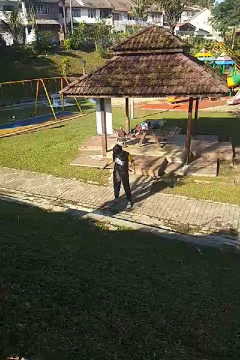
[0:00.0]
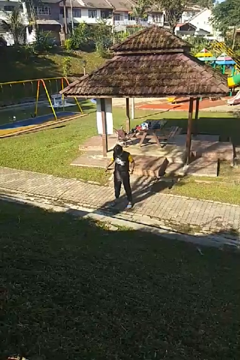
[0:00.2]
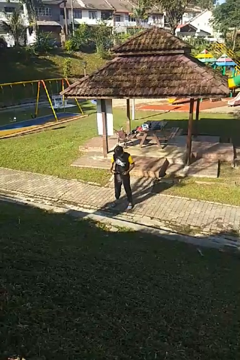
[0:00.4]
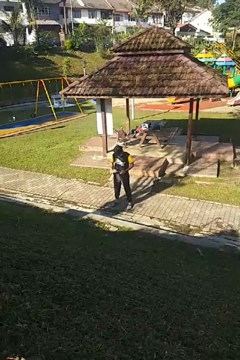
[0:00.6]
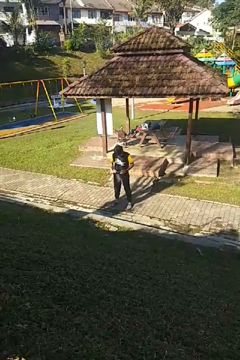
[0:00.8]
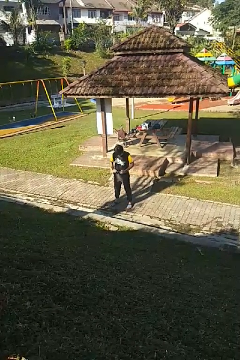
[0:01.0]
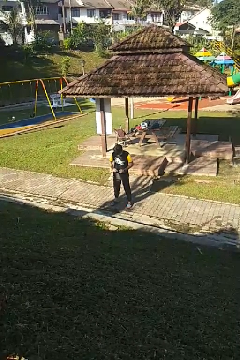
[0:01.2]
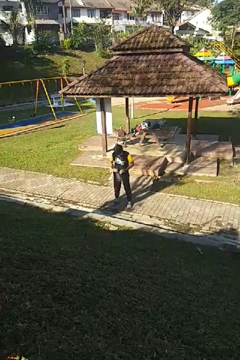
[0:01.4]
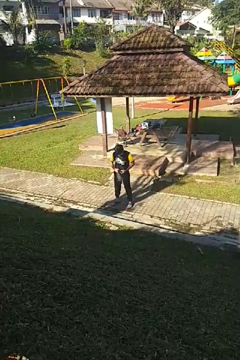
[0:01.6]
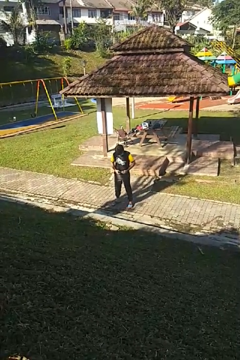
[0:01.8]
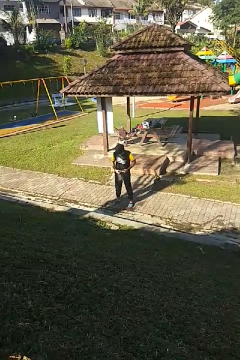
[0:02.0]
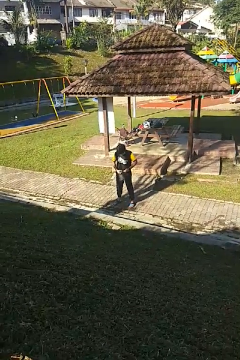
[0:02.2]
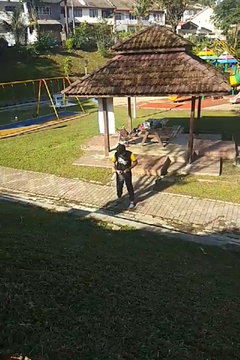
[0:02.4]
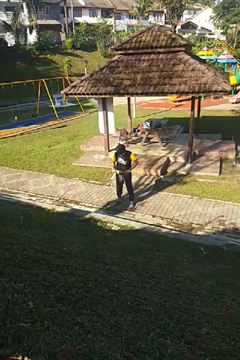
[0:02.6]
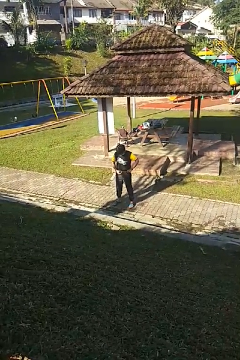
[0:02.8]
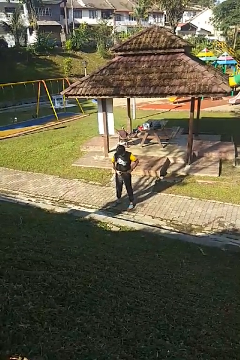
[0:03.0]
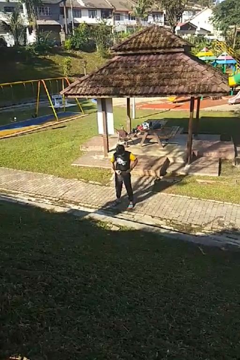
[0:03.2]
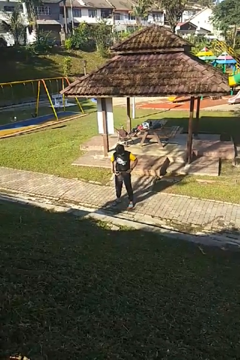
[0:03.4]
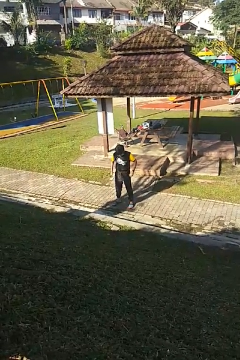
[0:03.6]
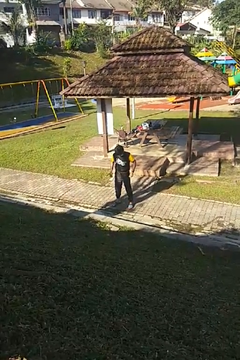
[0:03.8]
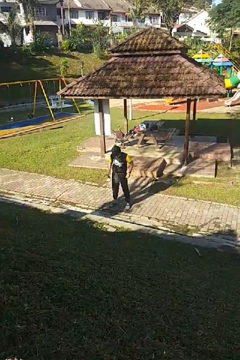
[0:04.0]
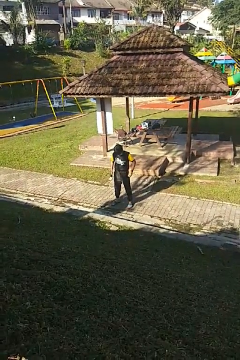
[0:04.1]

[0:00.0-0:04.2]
person puts on belt

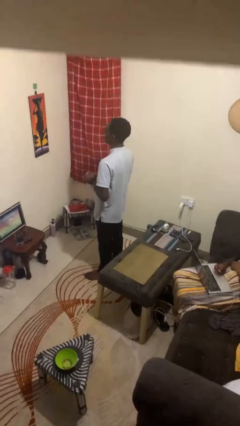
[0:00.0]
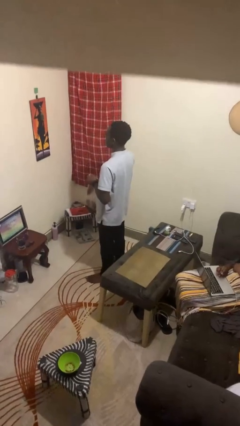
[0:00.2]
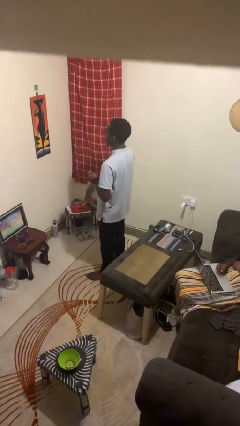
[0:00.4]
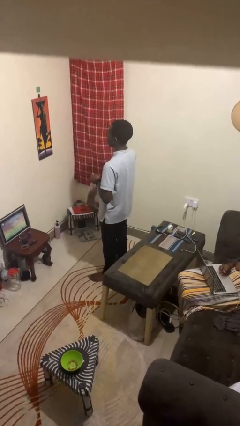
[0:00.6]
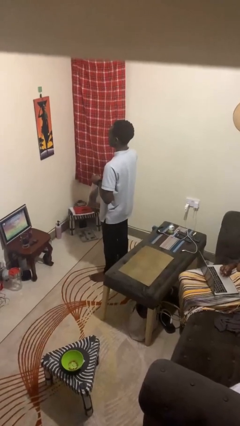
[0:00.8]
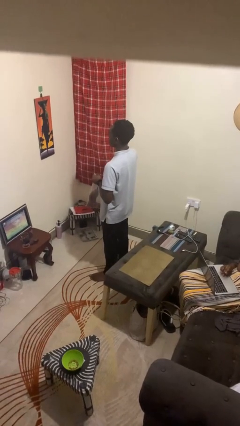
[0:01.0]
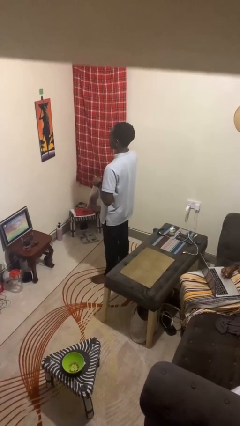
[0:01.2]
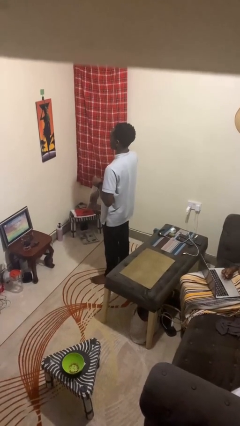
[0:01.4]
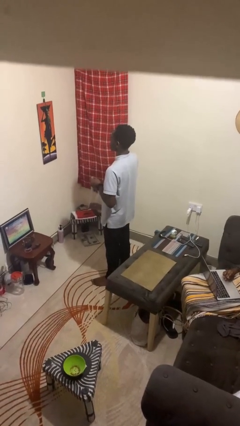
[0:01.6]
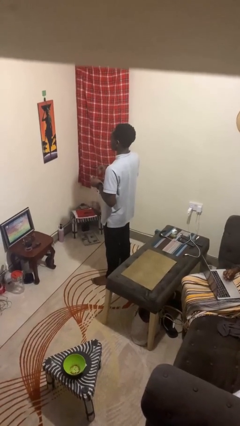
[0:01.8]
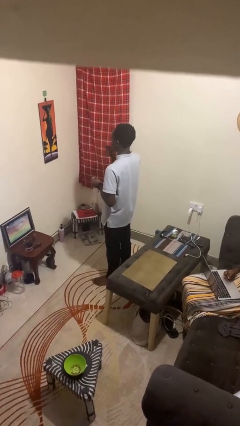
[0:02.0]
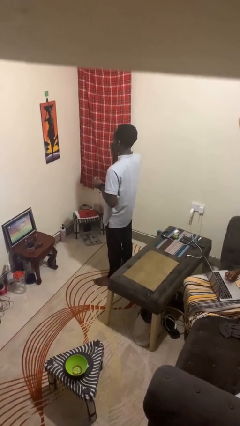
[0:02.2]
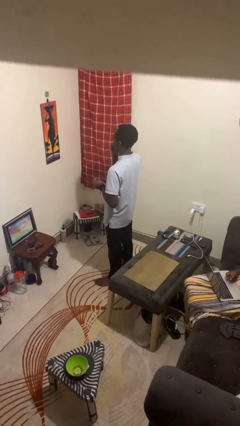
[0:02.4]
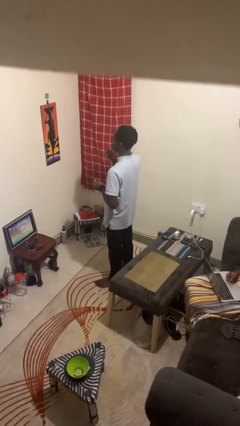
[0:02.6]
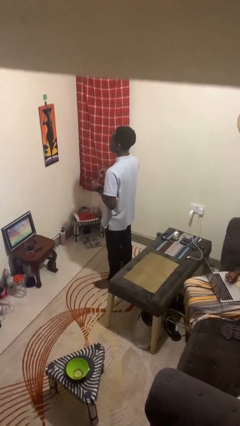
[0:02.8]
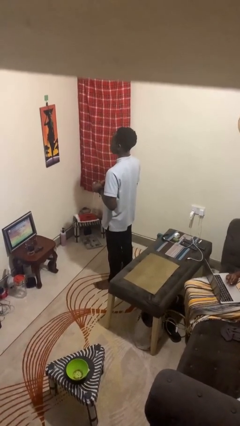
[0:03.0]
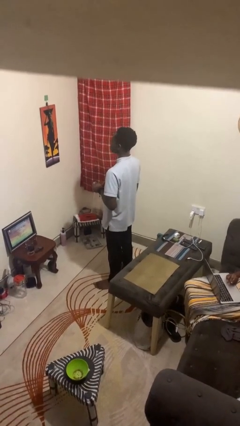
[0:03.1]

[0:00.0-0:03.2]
person eats snack from bag

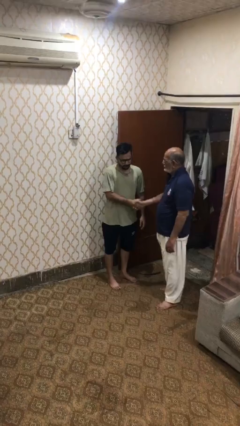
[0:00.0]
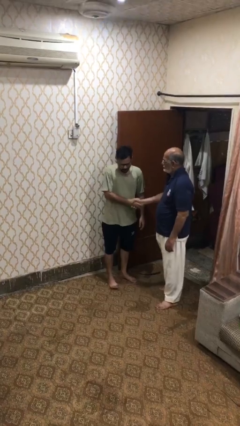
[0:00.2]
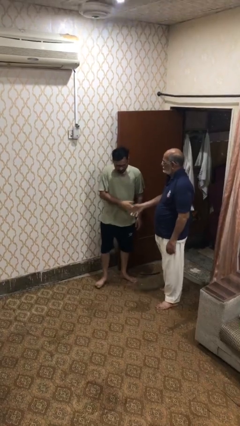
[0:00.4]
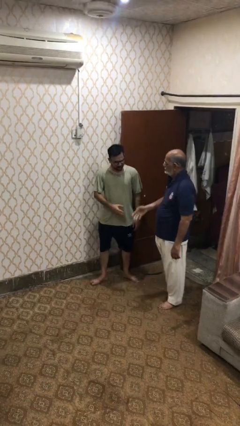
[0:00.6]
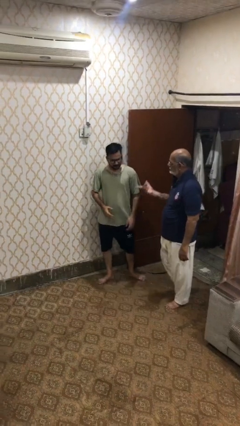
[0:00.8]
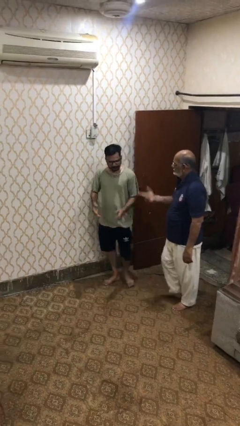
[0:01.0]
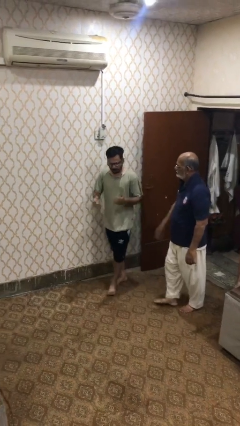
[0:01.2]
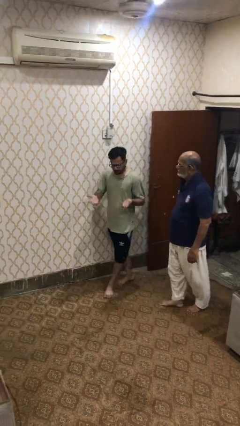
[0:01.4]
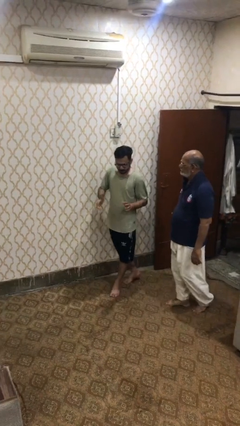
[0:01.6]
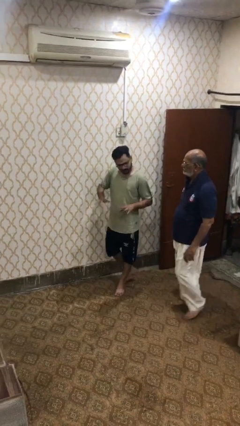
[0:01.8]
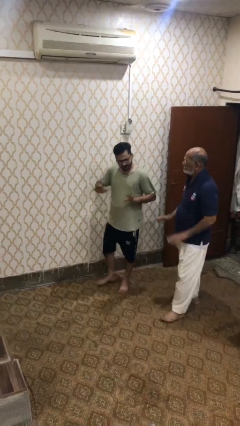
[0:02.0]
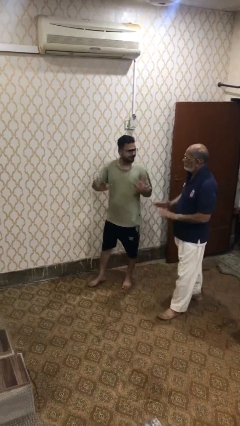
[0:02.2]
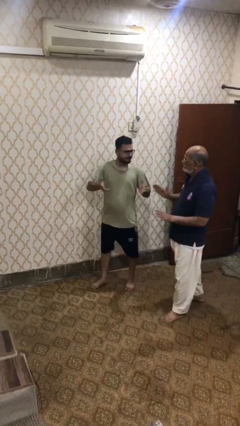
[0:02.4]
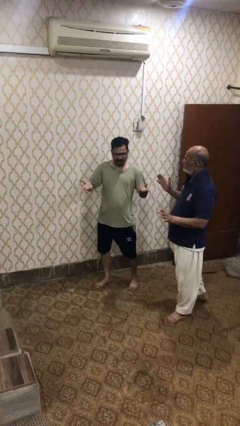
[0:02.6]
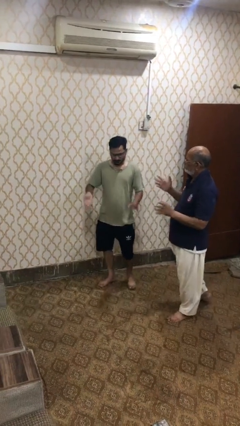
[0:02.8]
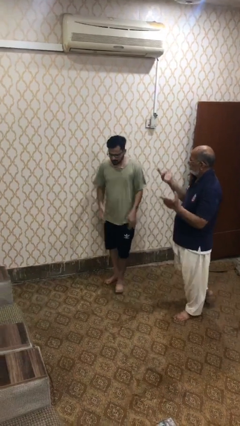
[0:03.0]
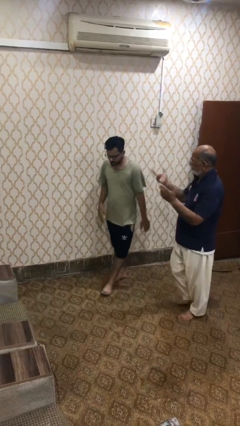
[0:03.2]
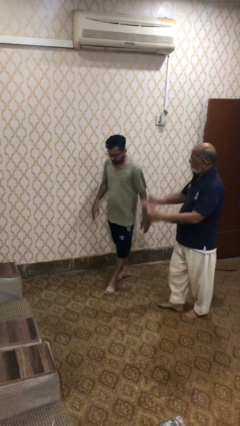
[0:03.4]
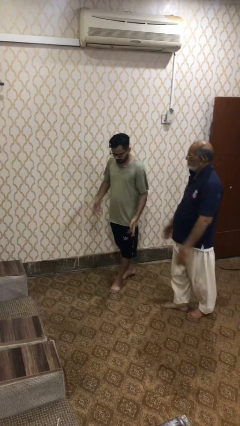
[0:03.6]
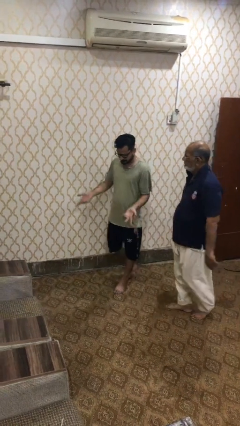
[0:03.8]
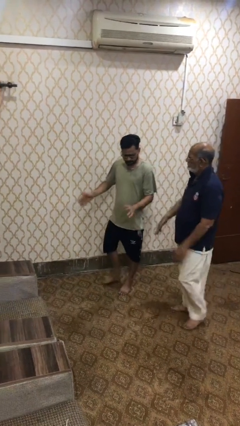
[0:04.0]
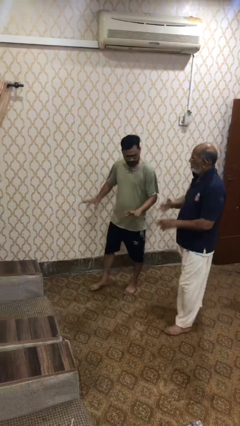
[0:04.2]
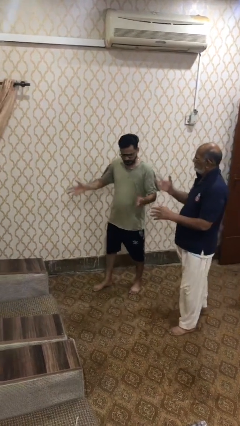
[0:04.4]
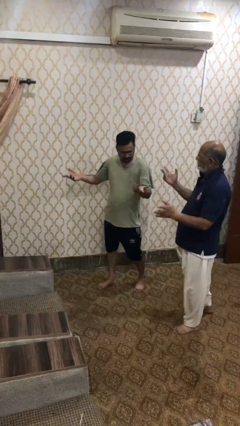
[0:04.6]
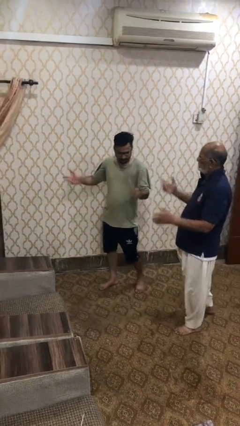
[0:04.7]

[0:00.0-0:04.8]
person talks to person

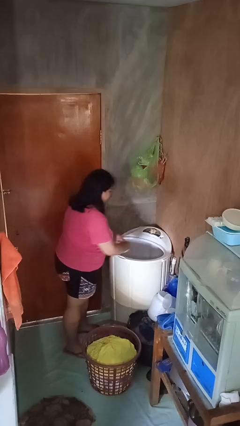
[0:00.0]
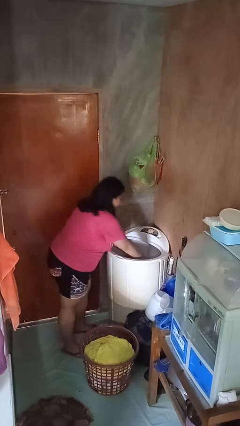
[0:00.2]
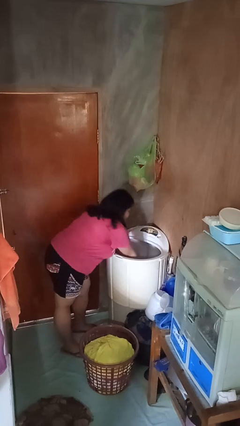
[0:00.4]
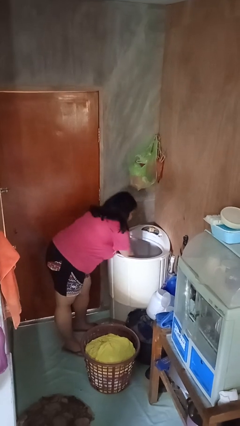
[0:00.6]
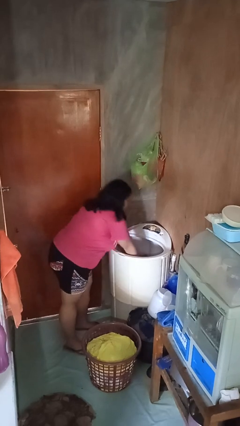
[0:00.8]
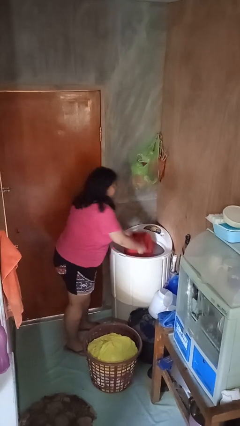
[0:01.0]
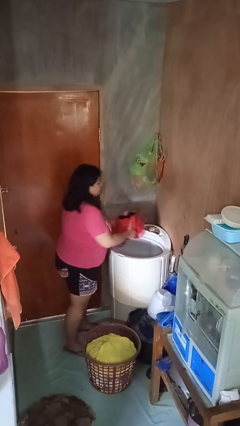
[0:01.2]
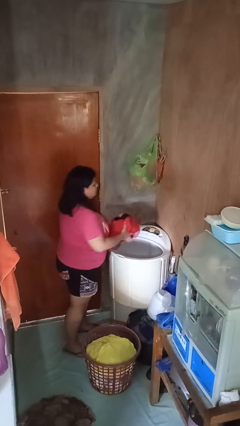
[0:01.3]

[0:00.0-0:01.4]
person unloads clotheswasher

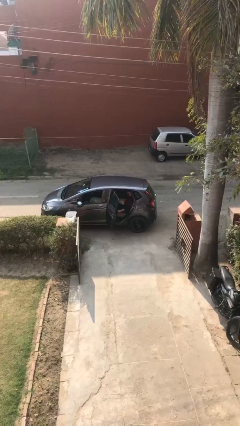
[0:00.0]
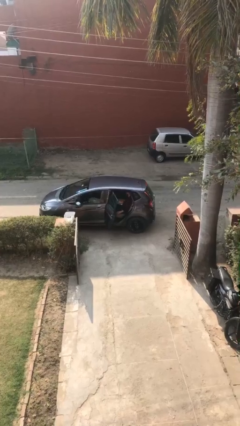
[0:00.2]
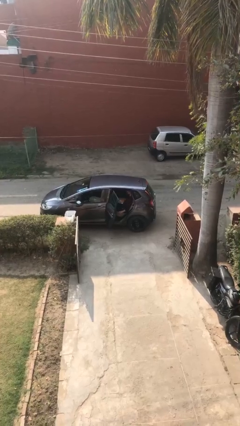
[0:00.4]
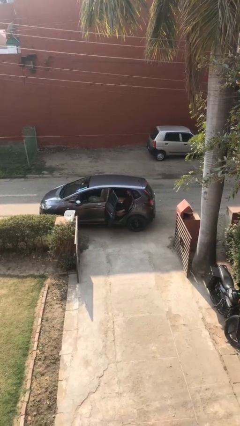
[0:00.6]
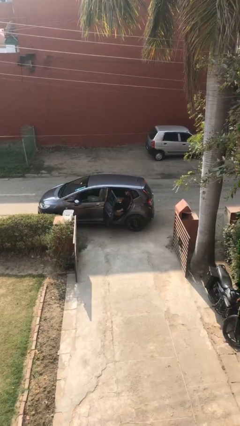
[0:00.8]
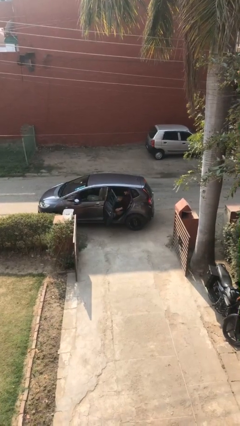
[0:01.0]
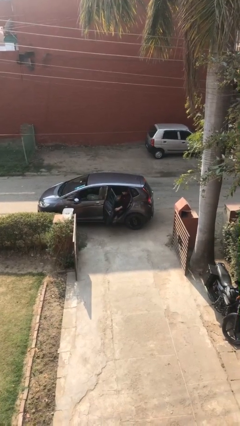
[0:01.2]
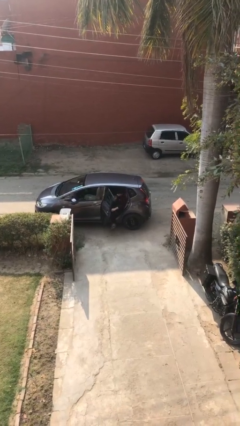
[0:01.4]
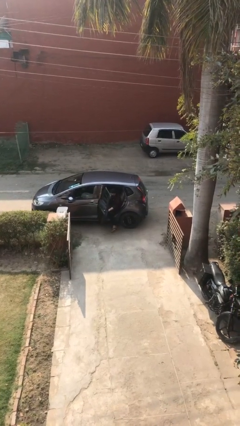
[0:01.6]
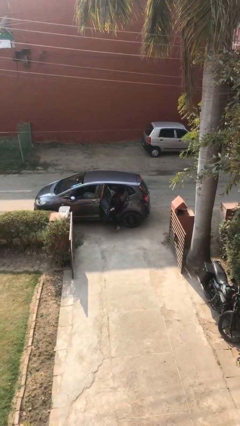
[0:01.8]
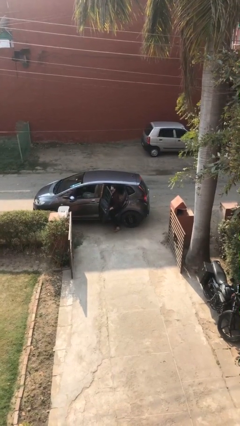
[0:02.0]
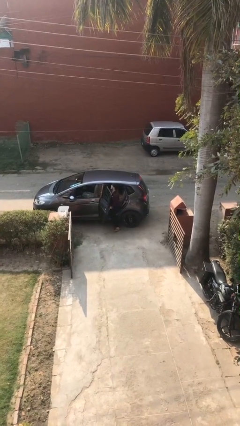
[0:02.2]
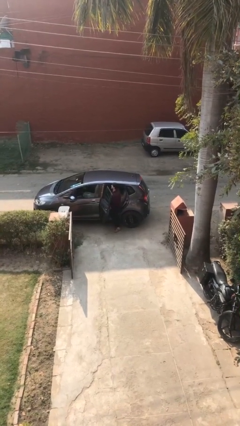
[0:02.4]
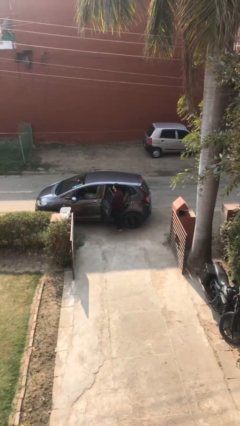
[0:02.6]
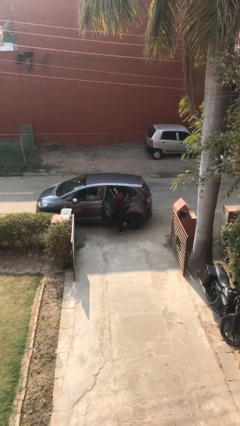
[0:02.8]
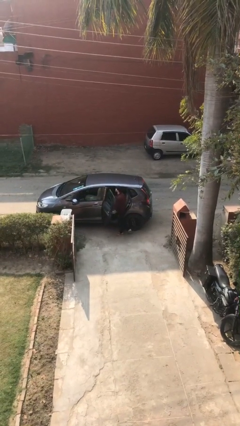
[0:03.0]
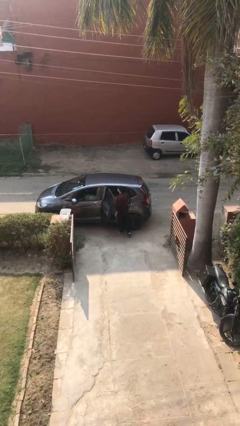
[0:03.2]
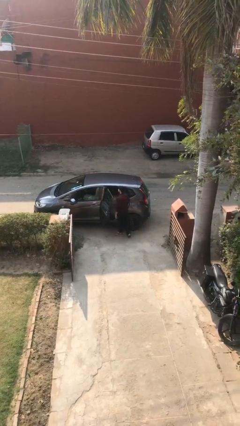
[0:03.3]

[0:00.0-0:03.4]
person exits car

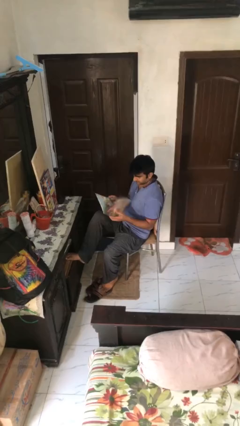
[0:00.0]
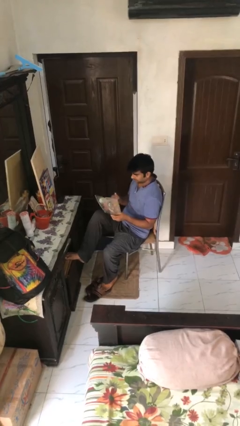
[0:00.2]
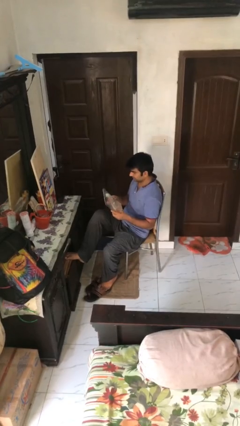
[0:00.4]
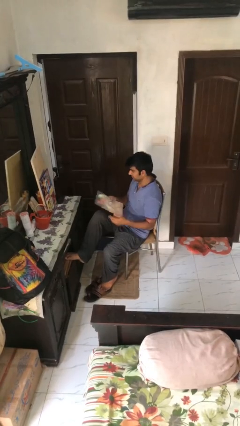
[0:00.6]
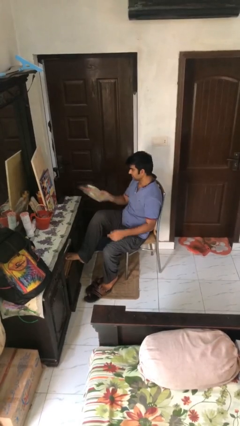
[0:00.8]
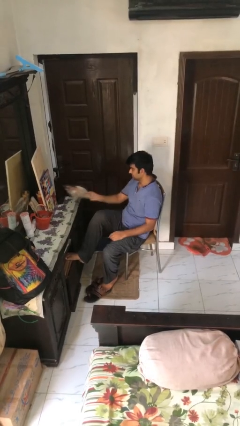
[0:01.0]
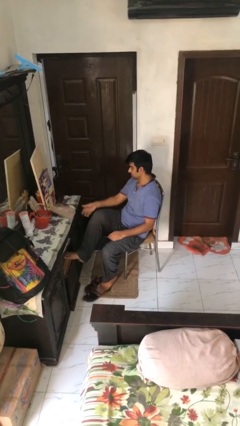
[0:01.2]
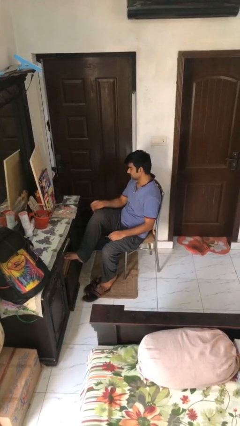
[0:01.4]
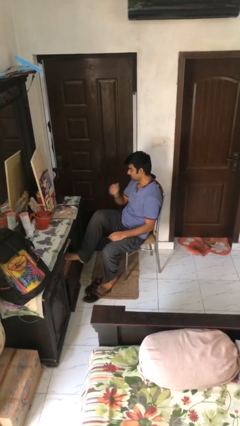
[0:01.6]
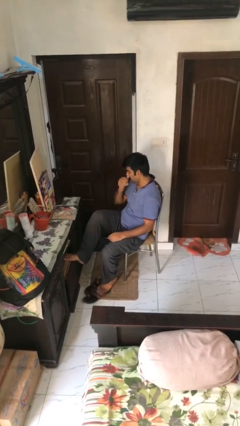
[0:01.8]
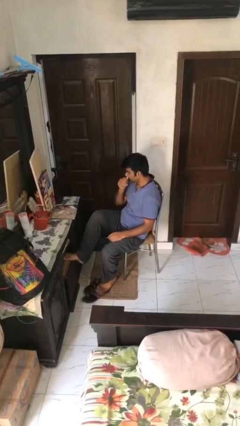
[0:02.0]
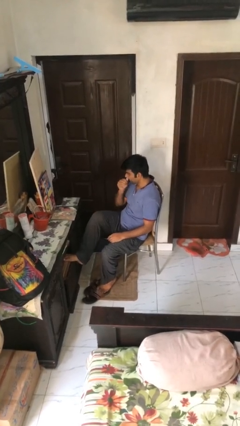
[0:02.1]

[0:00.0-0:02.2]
person puts down object on table
